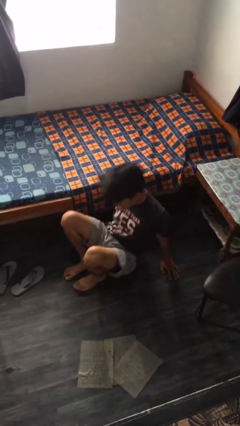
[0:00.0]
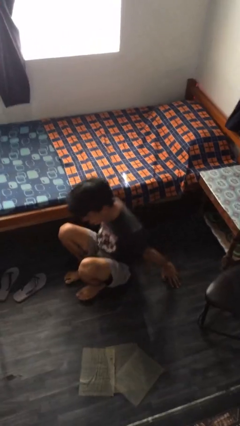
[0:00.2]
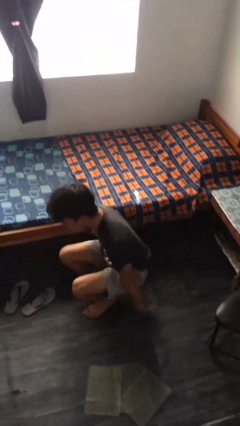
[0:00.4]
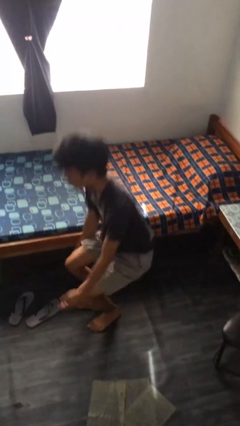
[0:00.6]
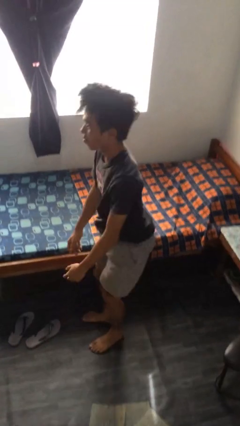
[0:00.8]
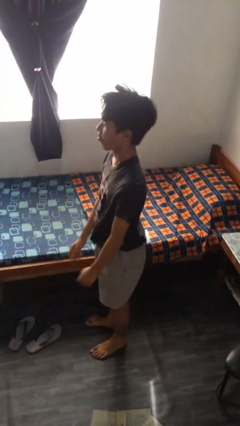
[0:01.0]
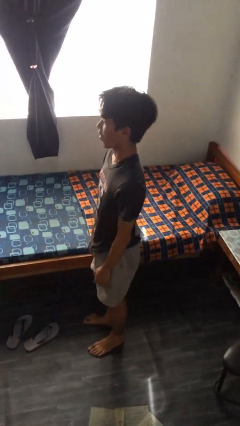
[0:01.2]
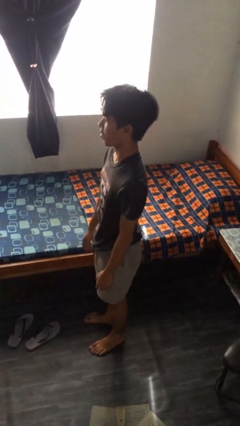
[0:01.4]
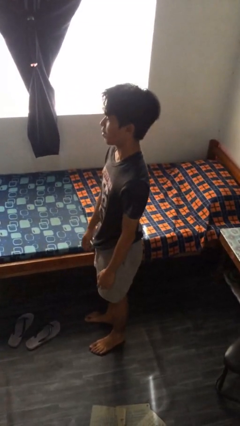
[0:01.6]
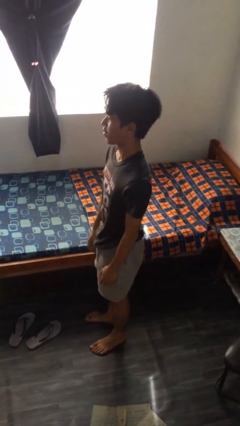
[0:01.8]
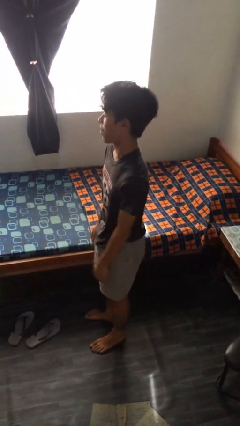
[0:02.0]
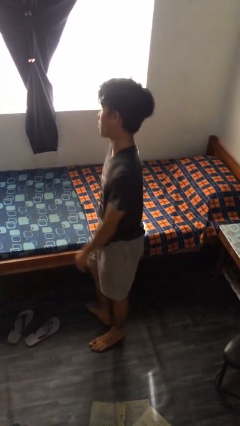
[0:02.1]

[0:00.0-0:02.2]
person stands up from floor

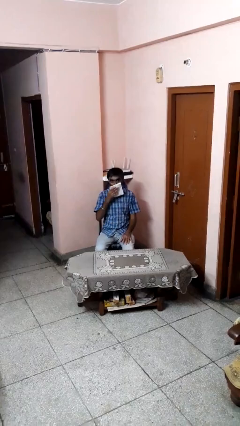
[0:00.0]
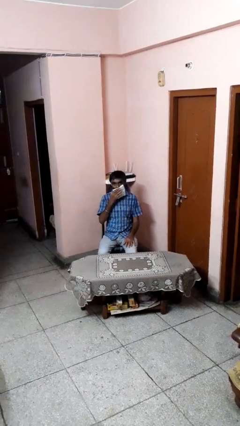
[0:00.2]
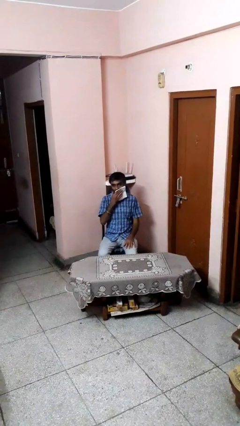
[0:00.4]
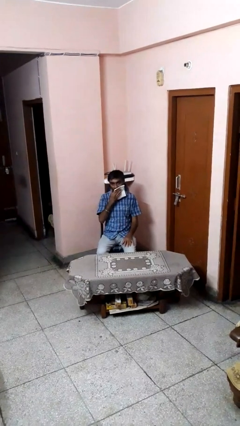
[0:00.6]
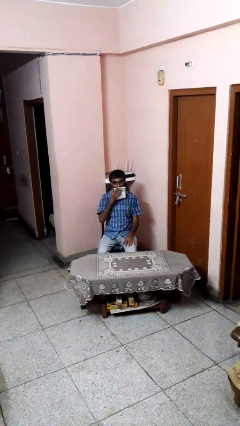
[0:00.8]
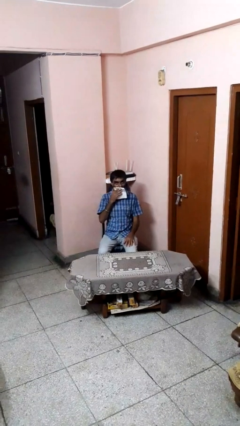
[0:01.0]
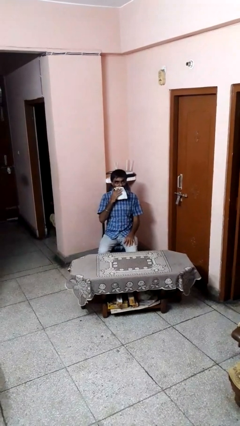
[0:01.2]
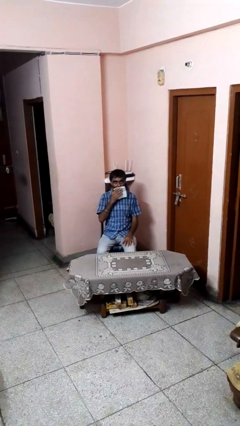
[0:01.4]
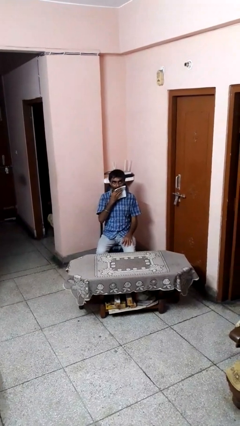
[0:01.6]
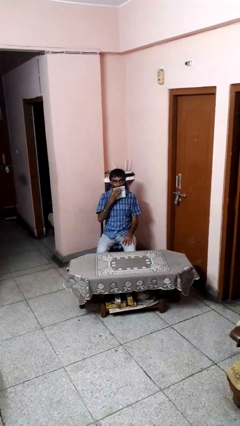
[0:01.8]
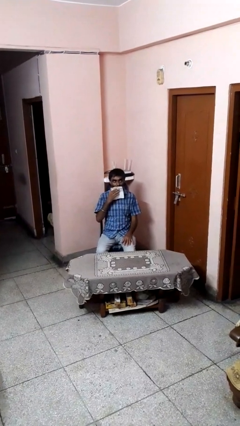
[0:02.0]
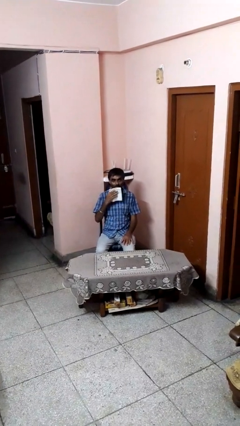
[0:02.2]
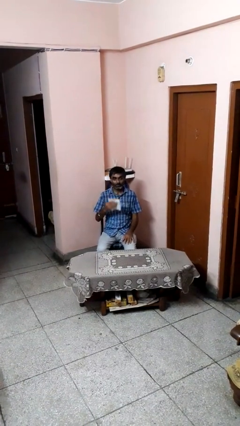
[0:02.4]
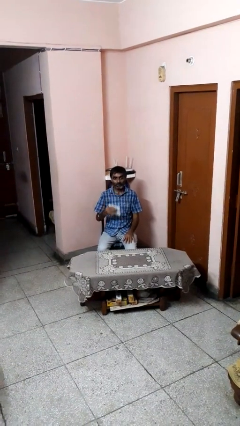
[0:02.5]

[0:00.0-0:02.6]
person wipes mouth with napkin

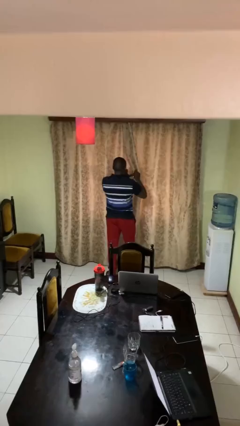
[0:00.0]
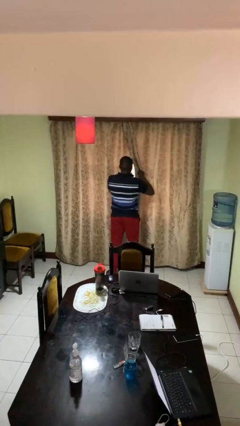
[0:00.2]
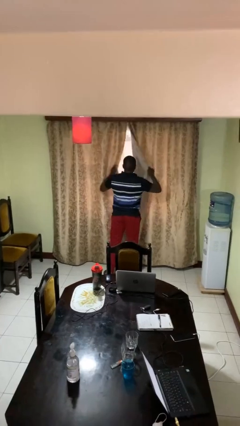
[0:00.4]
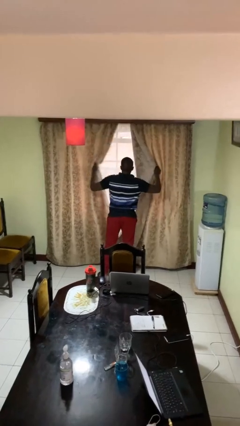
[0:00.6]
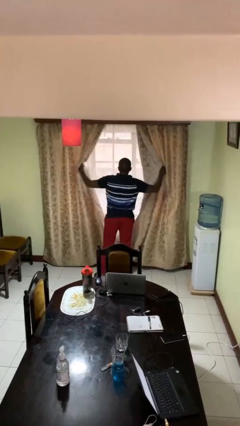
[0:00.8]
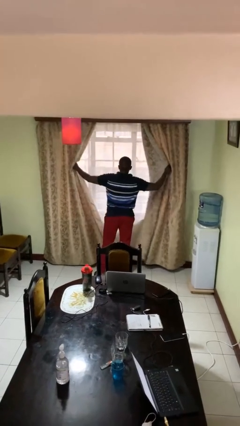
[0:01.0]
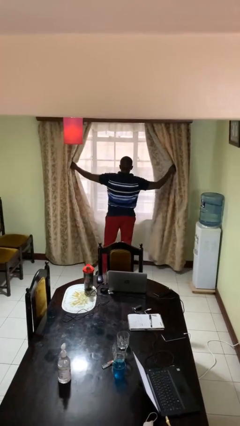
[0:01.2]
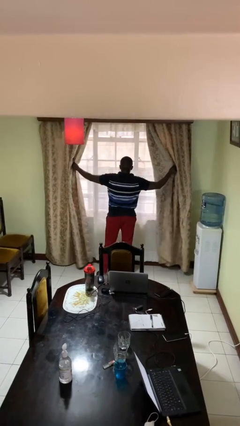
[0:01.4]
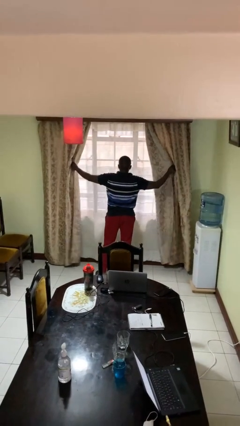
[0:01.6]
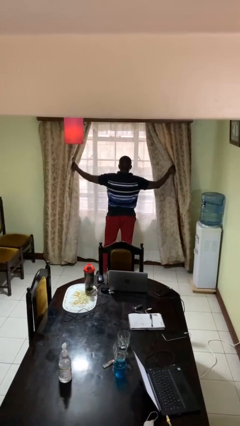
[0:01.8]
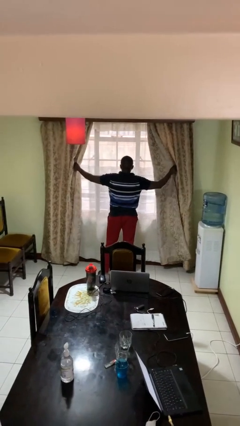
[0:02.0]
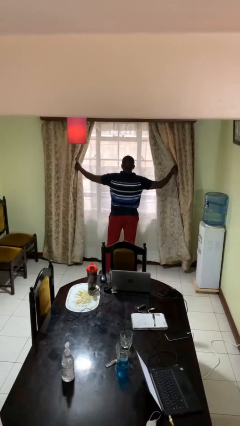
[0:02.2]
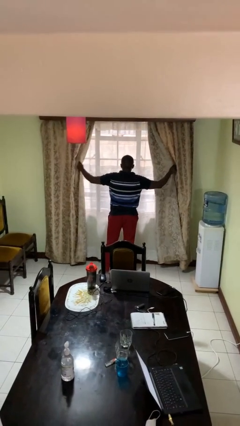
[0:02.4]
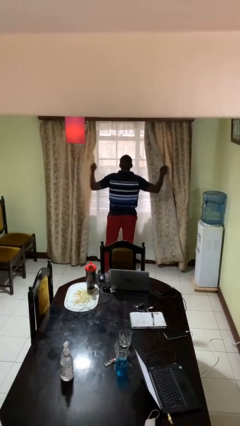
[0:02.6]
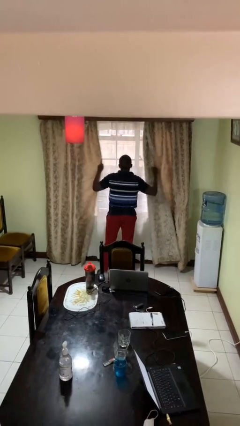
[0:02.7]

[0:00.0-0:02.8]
person opens curtains

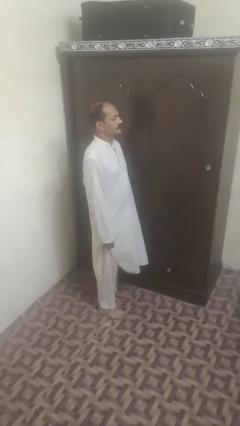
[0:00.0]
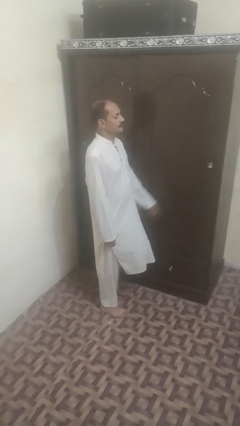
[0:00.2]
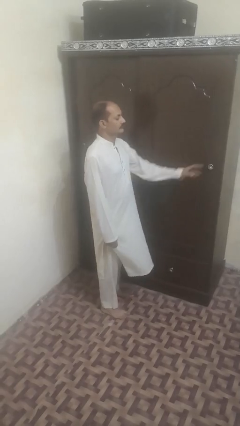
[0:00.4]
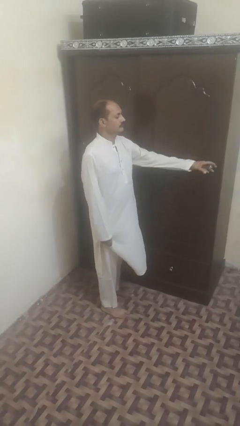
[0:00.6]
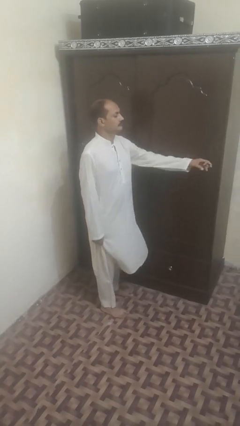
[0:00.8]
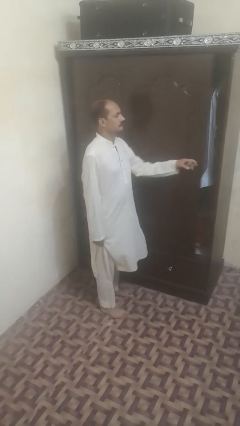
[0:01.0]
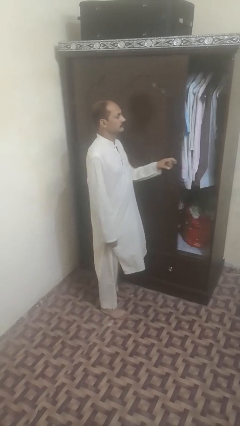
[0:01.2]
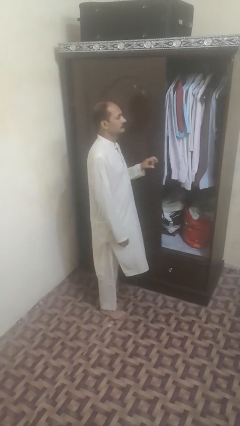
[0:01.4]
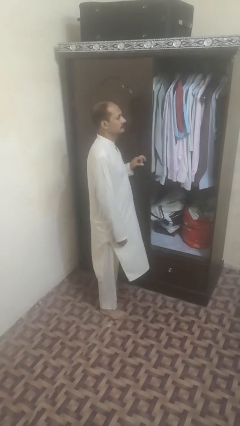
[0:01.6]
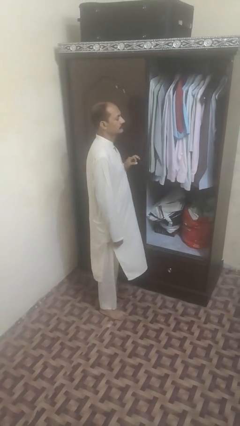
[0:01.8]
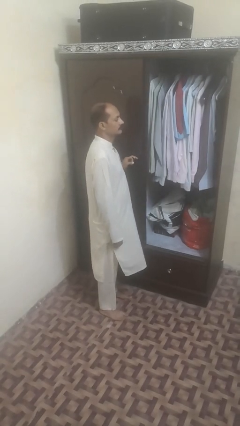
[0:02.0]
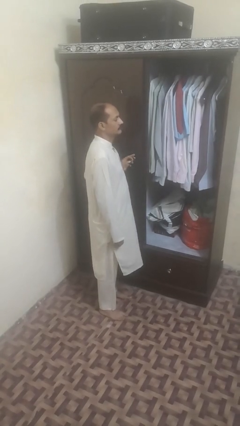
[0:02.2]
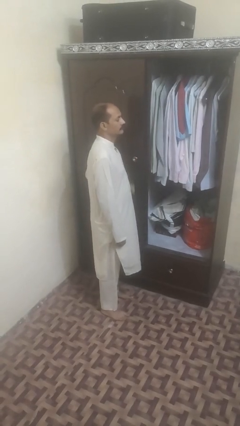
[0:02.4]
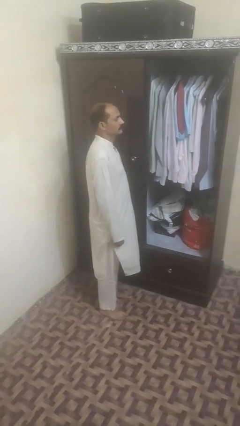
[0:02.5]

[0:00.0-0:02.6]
person opens sliding door

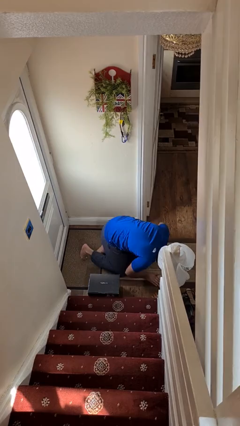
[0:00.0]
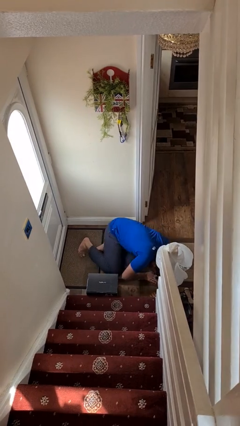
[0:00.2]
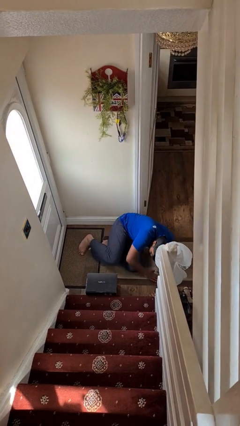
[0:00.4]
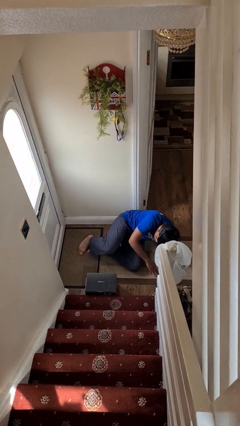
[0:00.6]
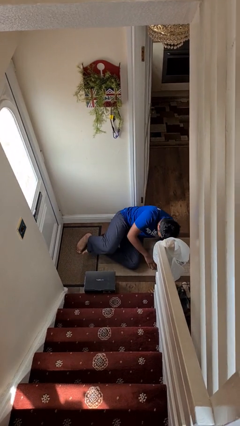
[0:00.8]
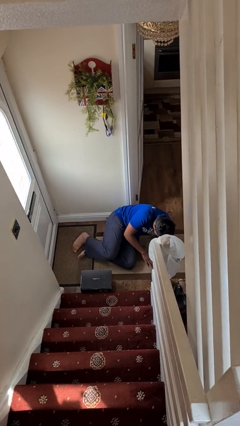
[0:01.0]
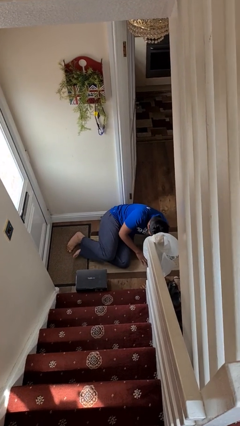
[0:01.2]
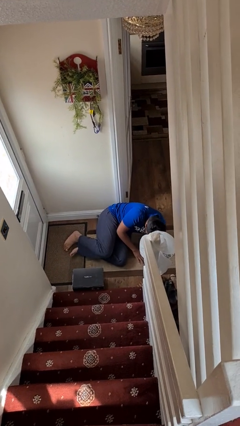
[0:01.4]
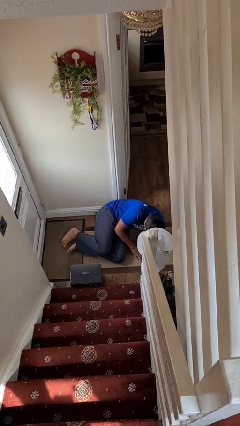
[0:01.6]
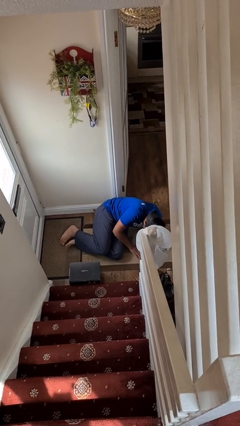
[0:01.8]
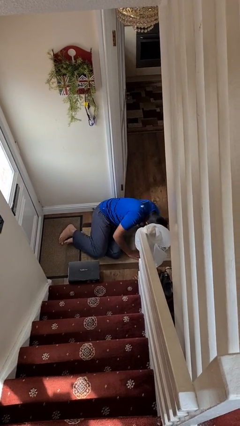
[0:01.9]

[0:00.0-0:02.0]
person lies down on floor

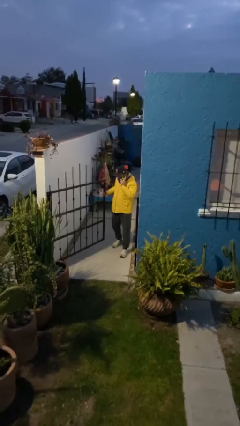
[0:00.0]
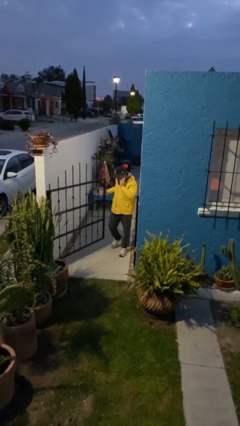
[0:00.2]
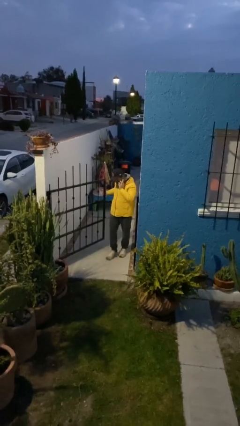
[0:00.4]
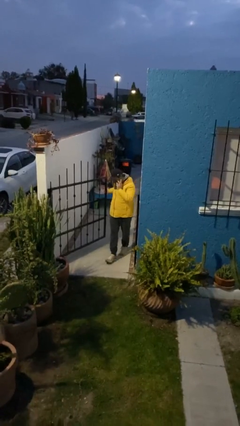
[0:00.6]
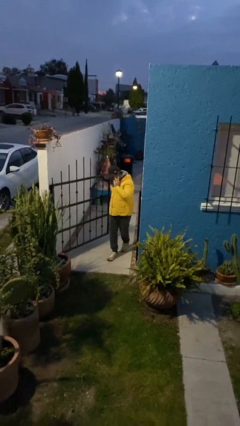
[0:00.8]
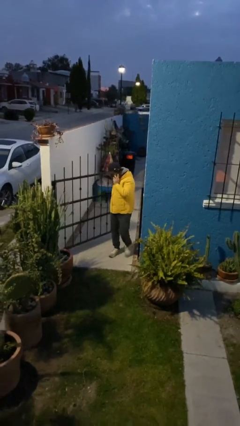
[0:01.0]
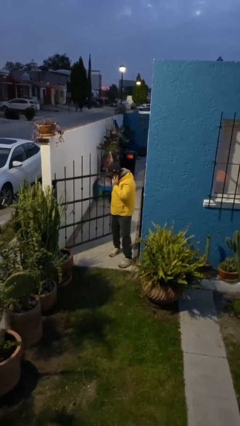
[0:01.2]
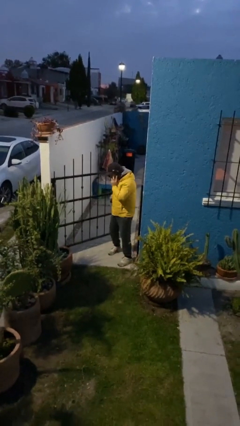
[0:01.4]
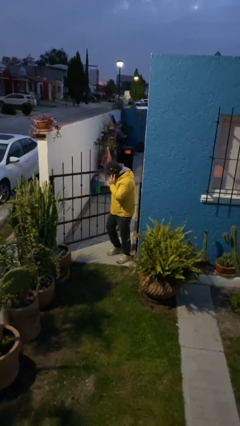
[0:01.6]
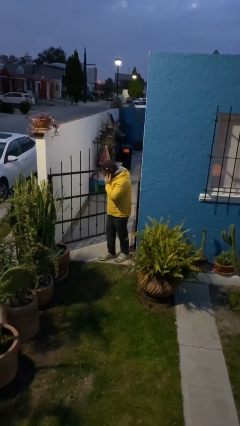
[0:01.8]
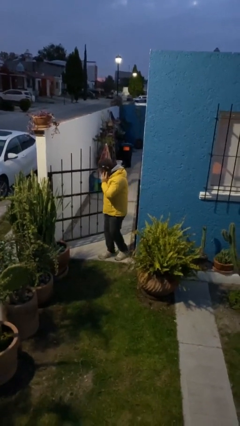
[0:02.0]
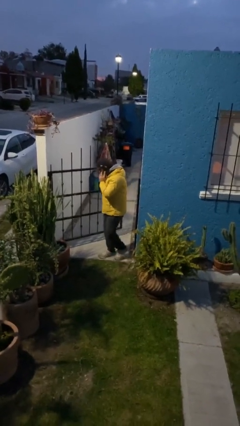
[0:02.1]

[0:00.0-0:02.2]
person enters scene through structure

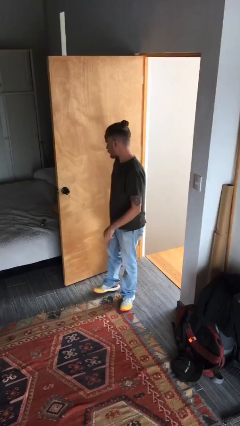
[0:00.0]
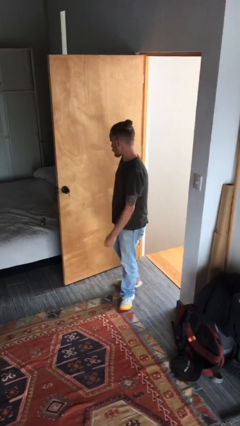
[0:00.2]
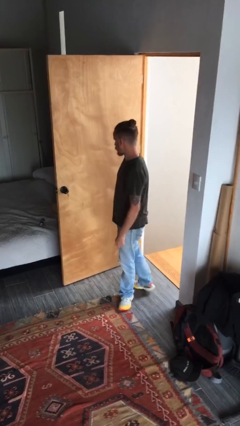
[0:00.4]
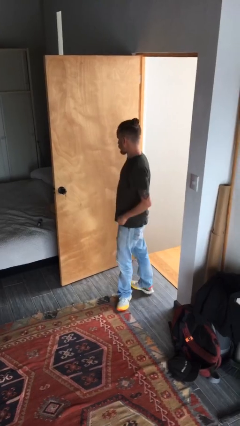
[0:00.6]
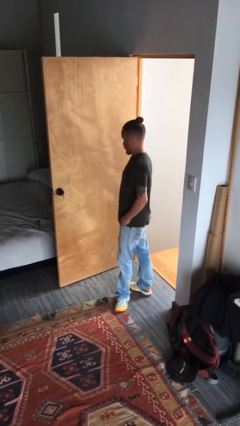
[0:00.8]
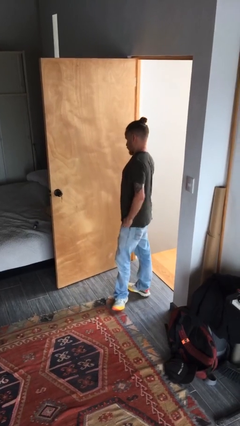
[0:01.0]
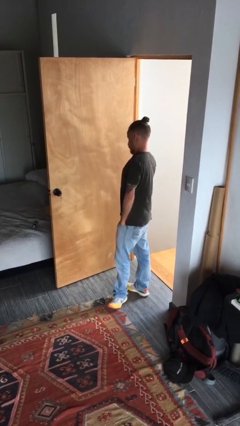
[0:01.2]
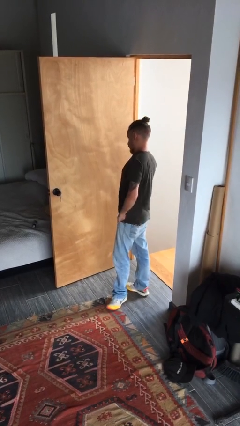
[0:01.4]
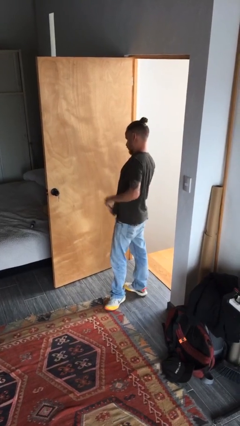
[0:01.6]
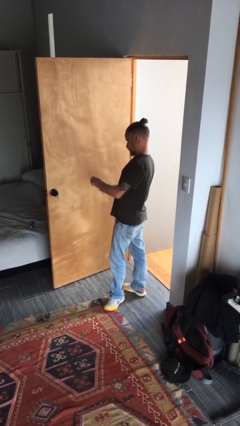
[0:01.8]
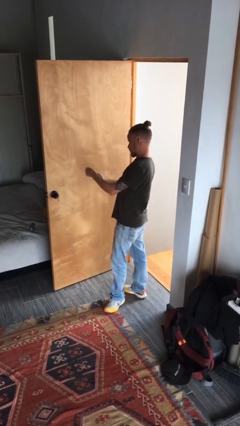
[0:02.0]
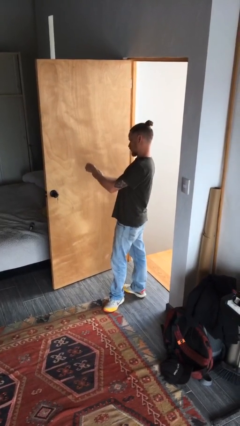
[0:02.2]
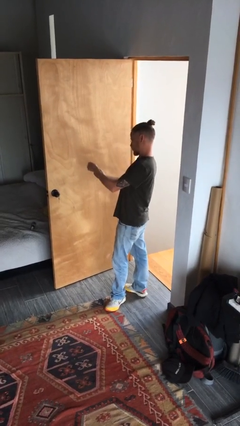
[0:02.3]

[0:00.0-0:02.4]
person takes phone from pocket
